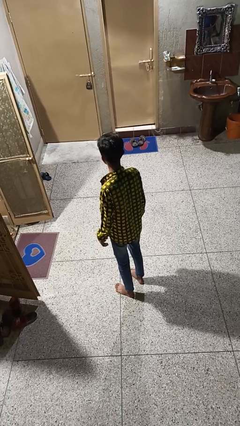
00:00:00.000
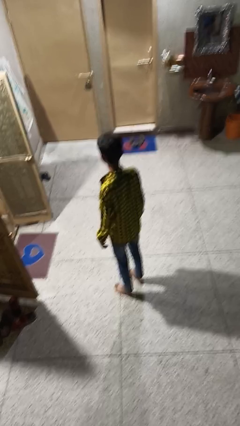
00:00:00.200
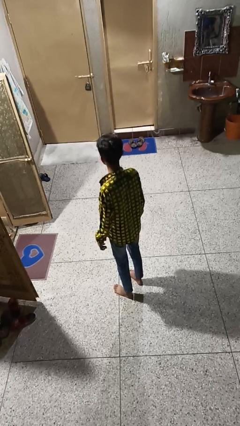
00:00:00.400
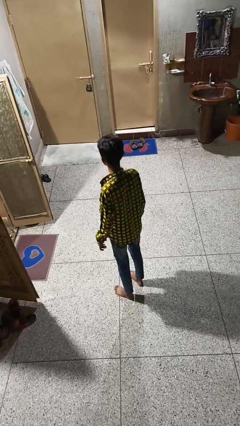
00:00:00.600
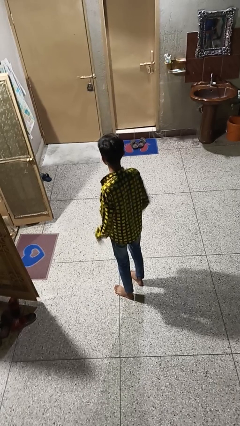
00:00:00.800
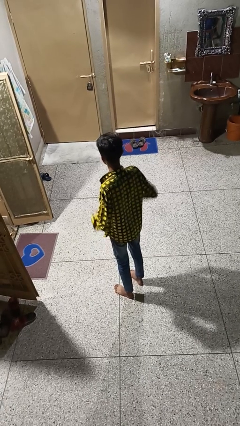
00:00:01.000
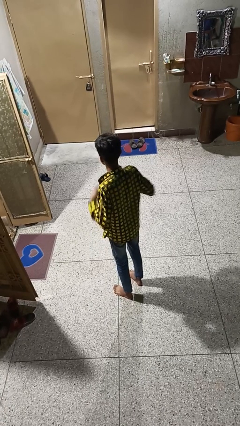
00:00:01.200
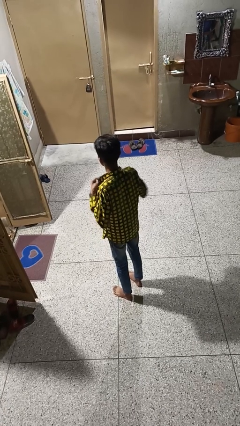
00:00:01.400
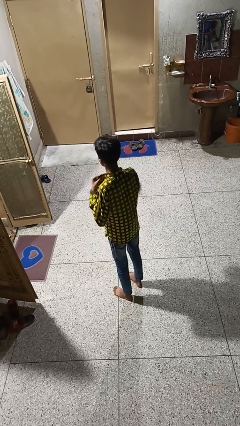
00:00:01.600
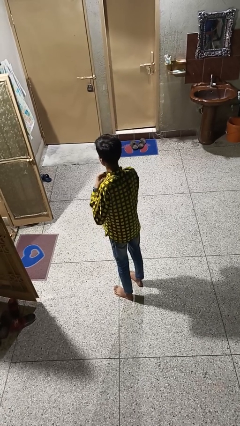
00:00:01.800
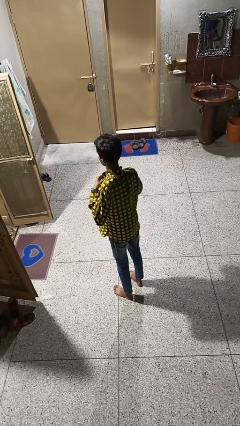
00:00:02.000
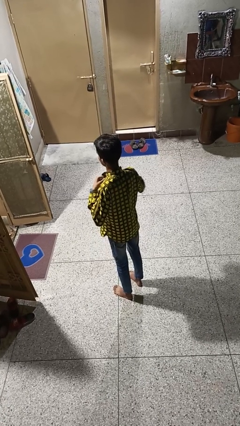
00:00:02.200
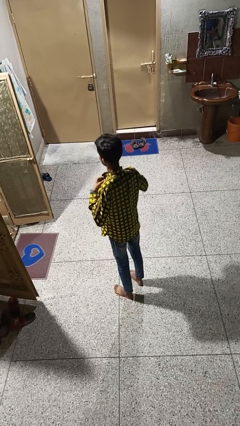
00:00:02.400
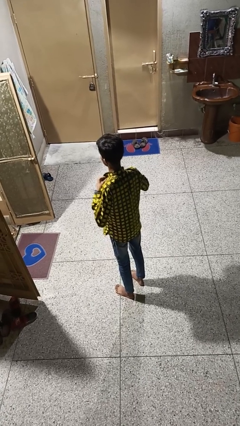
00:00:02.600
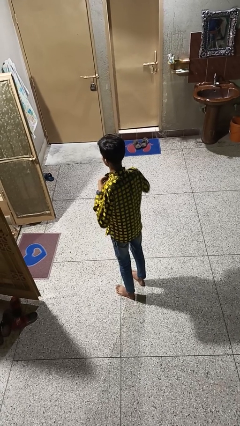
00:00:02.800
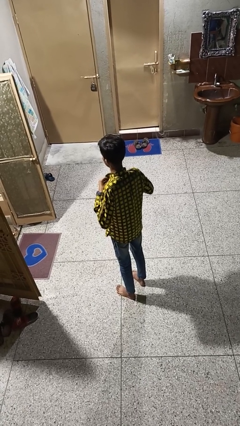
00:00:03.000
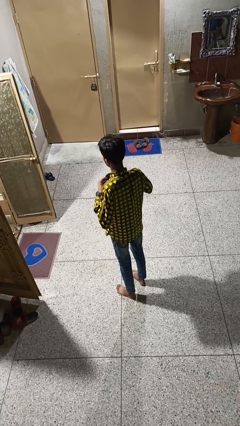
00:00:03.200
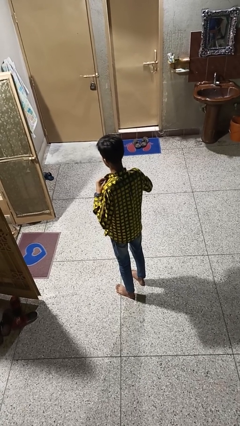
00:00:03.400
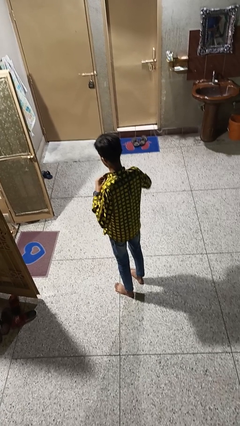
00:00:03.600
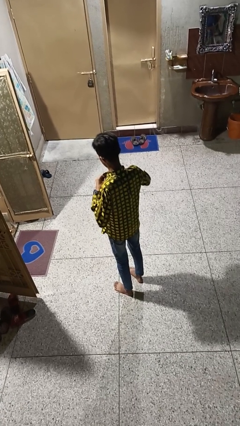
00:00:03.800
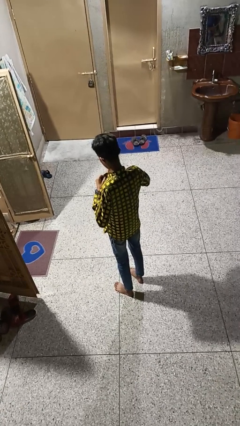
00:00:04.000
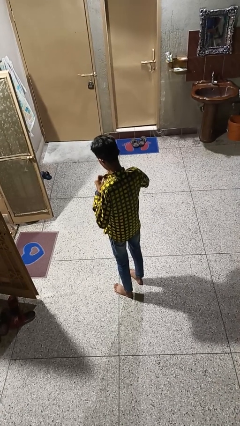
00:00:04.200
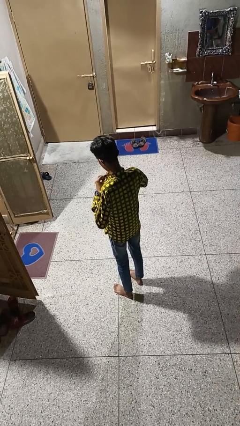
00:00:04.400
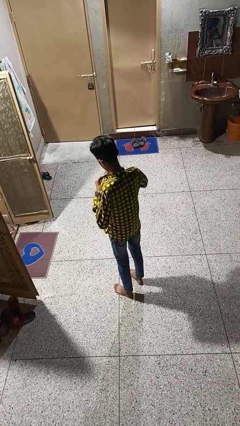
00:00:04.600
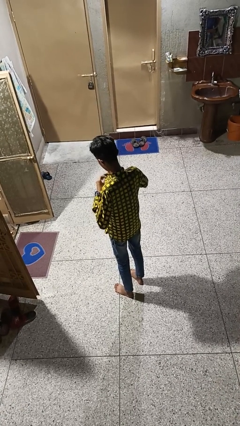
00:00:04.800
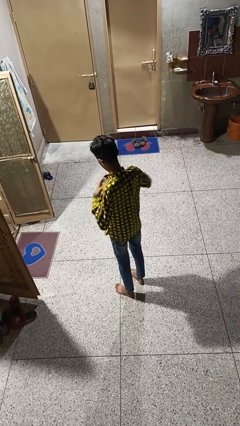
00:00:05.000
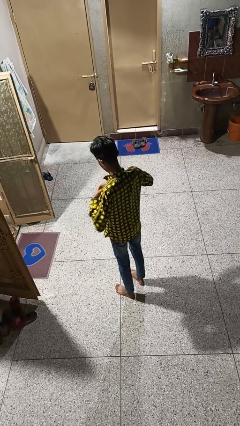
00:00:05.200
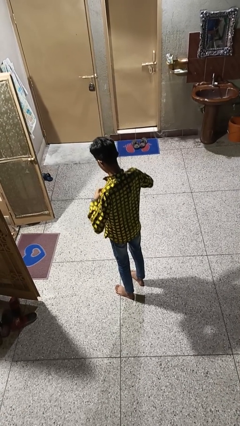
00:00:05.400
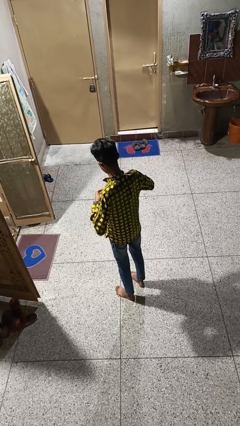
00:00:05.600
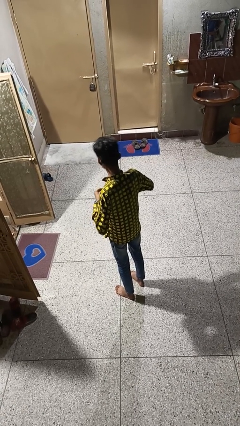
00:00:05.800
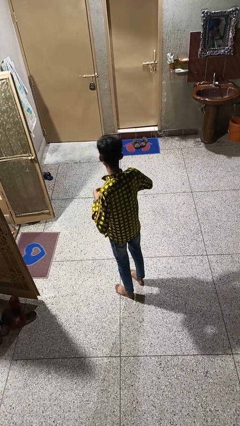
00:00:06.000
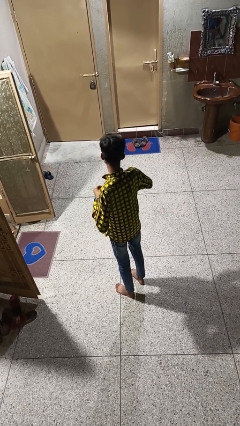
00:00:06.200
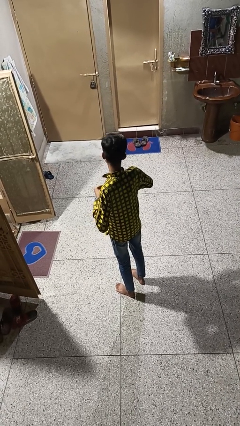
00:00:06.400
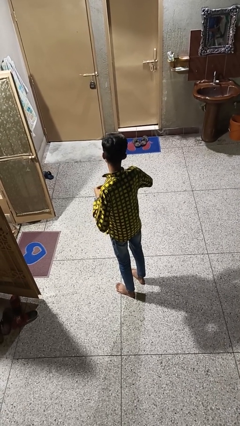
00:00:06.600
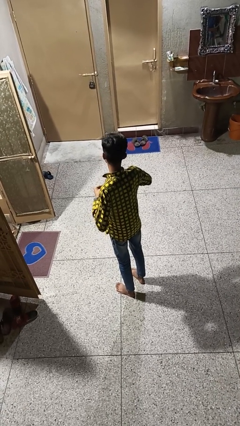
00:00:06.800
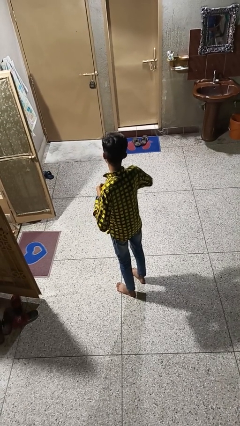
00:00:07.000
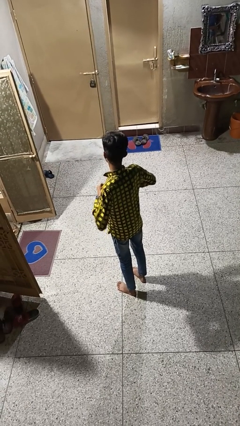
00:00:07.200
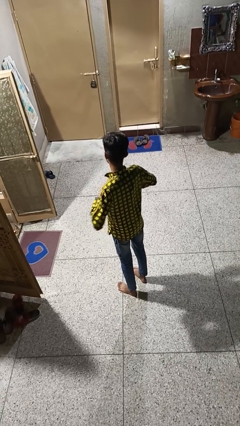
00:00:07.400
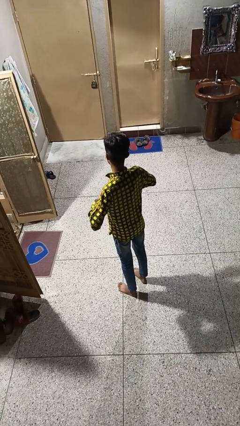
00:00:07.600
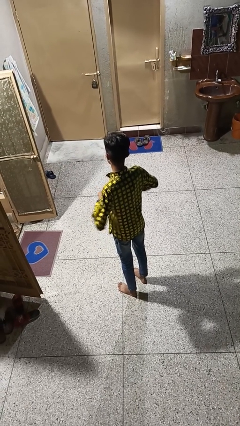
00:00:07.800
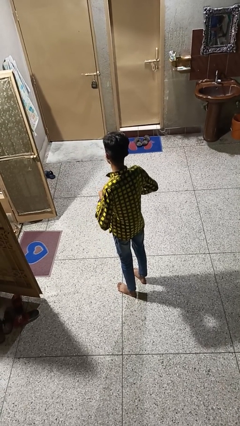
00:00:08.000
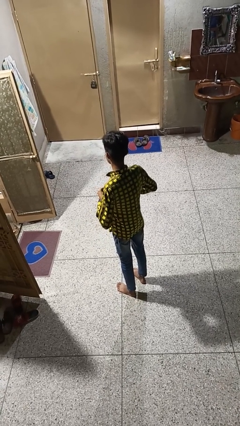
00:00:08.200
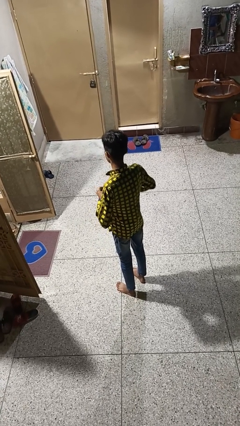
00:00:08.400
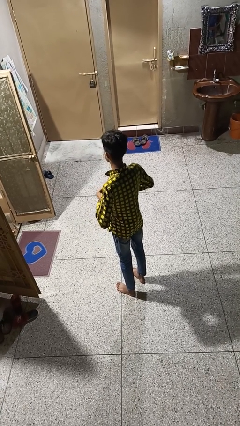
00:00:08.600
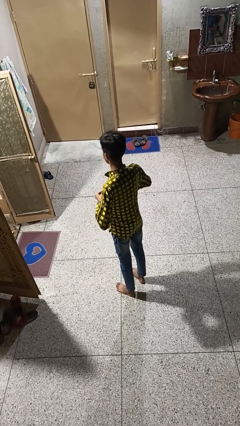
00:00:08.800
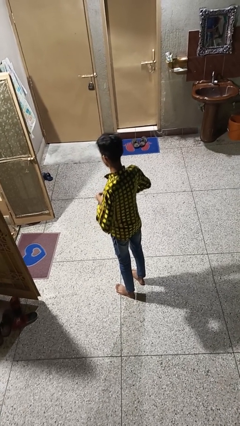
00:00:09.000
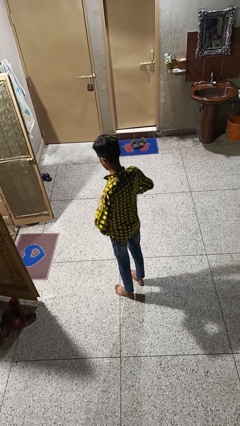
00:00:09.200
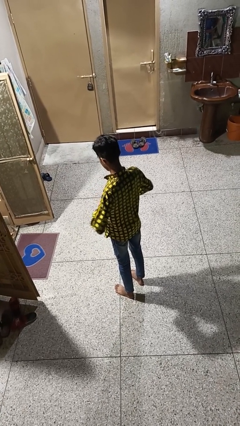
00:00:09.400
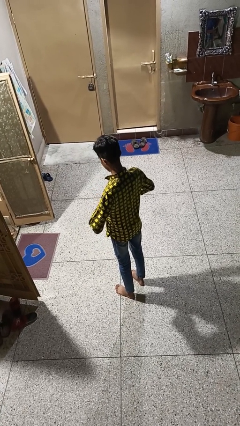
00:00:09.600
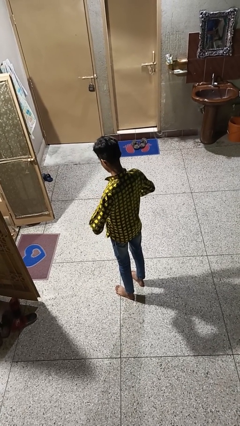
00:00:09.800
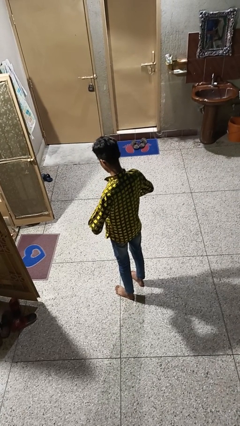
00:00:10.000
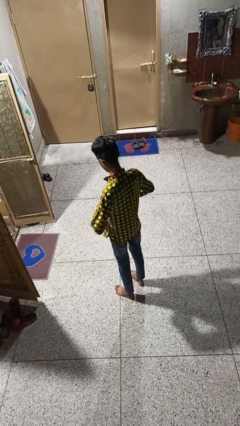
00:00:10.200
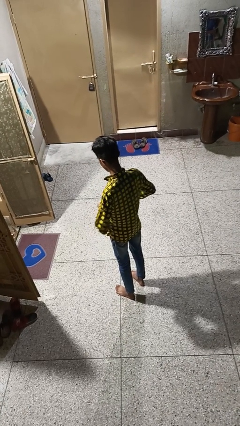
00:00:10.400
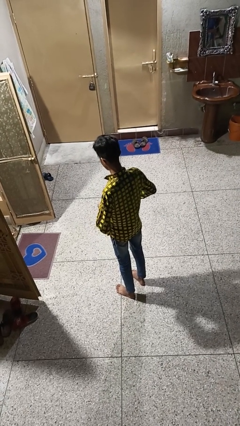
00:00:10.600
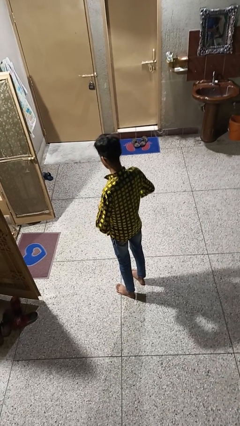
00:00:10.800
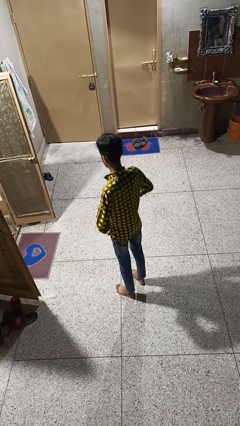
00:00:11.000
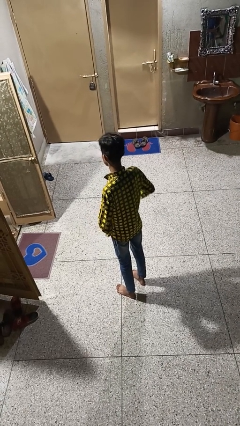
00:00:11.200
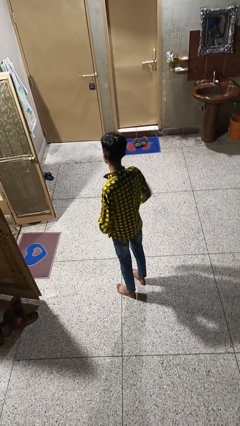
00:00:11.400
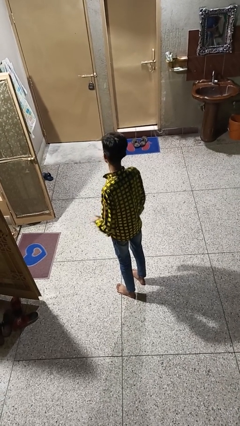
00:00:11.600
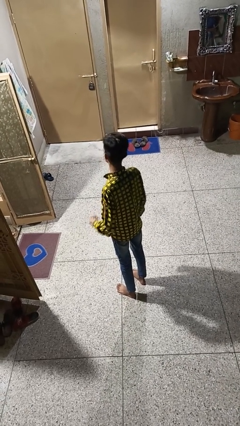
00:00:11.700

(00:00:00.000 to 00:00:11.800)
person buttons shirt

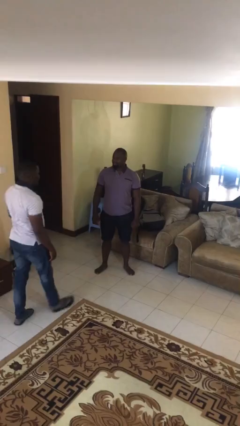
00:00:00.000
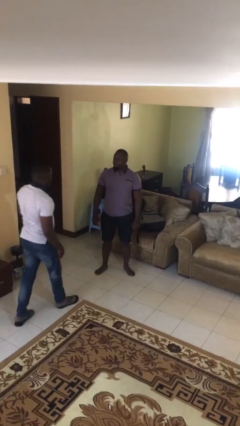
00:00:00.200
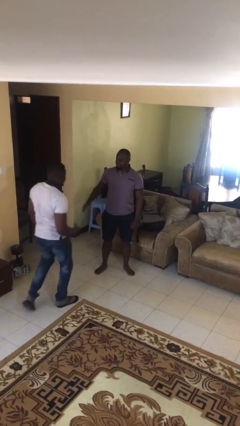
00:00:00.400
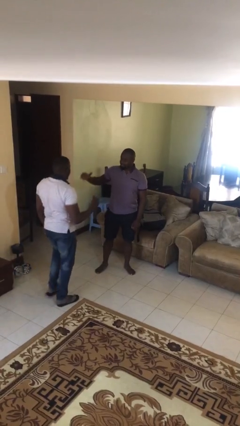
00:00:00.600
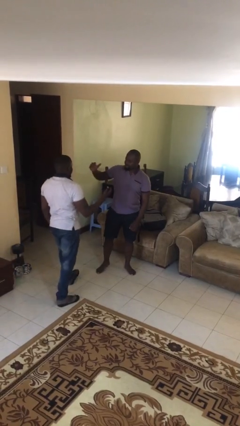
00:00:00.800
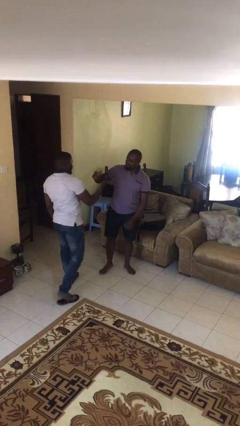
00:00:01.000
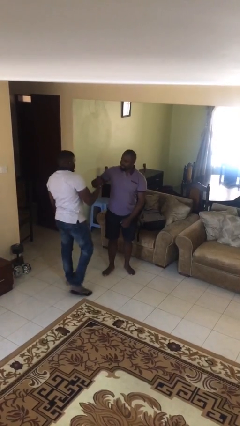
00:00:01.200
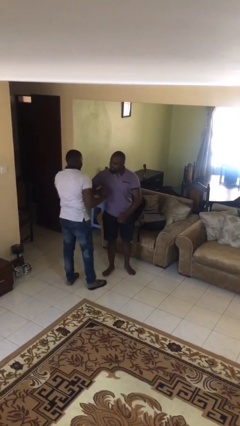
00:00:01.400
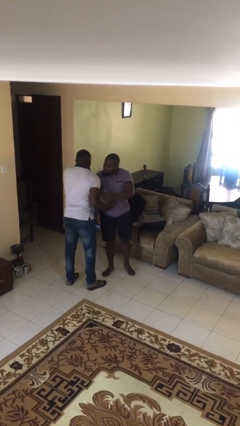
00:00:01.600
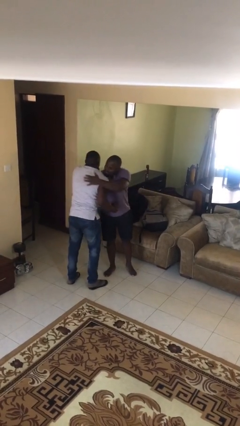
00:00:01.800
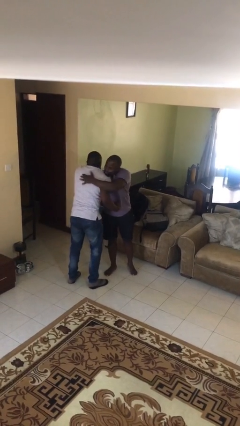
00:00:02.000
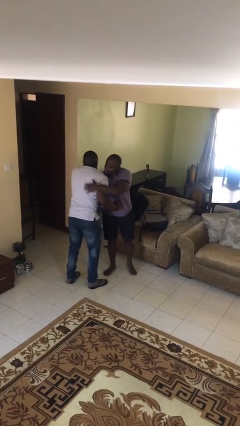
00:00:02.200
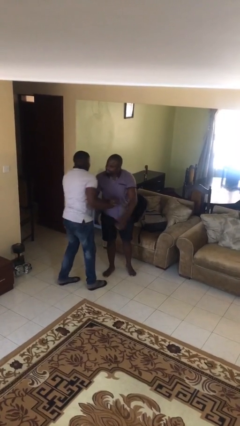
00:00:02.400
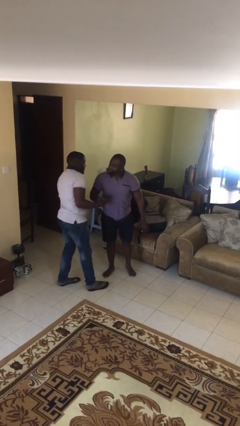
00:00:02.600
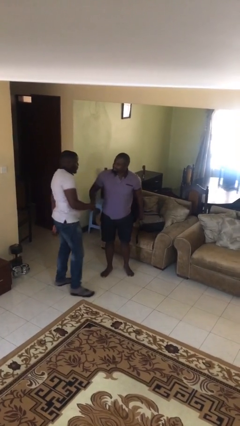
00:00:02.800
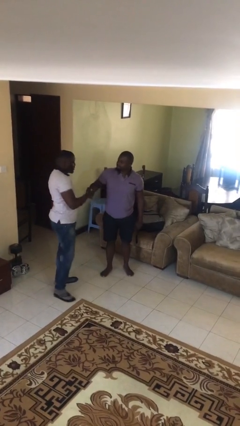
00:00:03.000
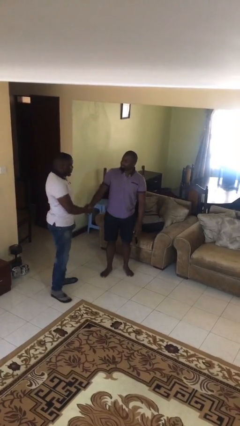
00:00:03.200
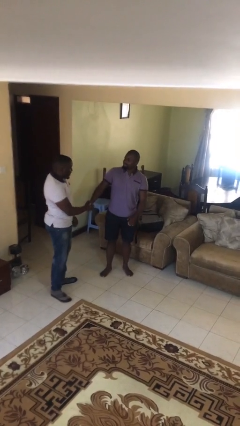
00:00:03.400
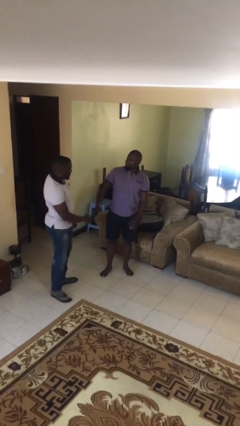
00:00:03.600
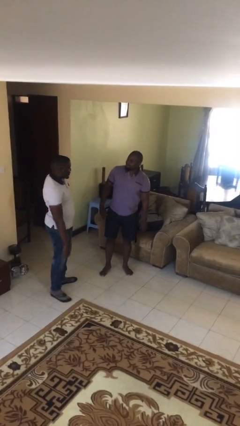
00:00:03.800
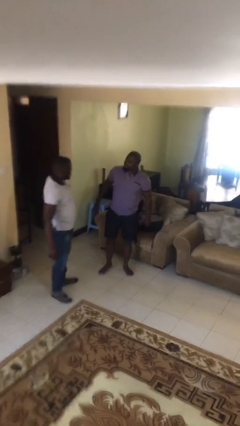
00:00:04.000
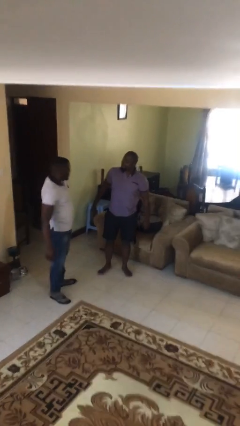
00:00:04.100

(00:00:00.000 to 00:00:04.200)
person embraces person

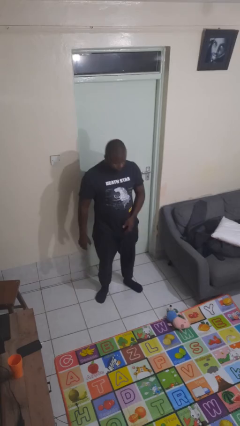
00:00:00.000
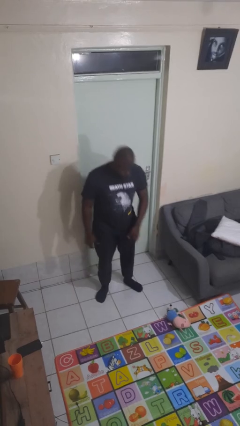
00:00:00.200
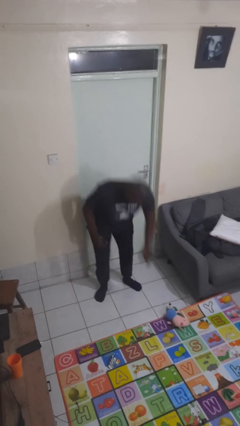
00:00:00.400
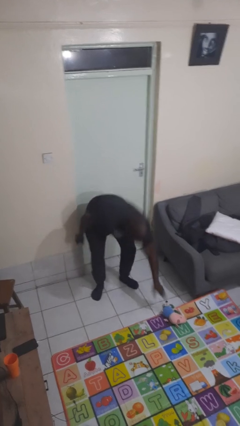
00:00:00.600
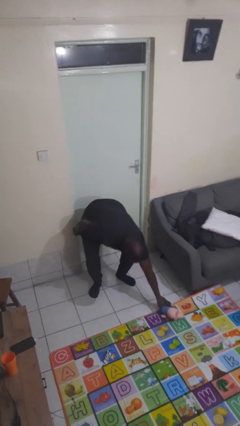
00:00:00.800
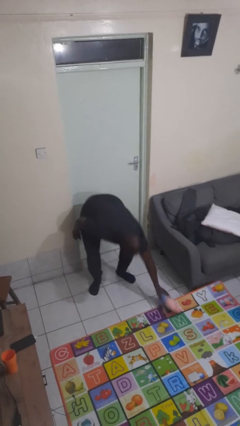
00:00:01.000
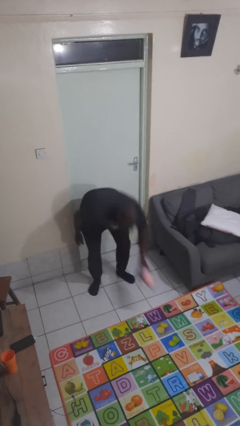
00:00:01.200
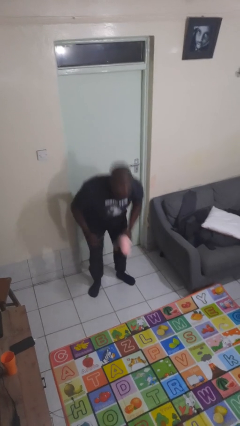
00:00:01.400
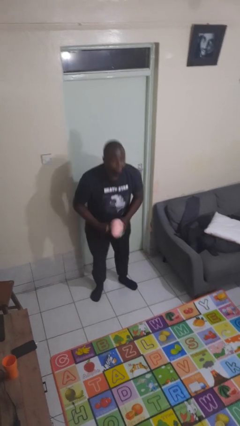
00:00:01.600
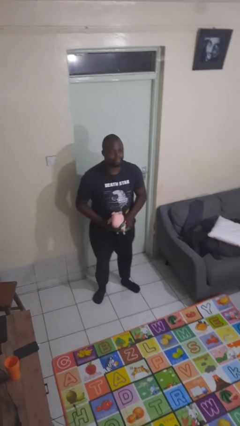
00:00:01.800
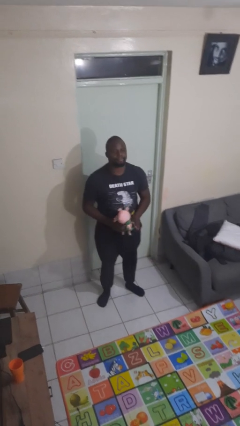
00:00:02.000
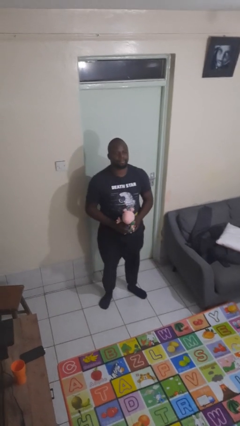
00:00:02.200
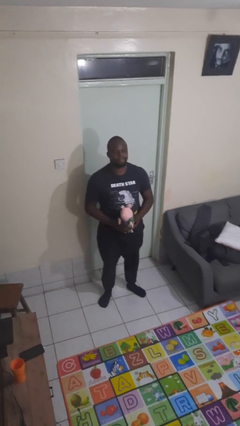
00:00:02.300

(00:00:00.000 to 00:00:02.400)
person picks up object from floor
